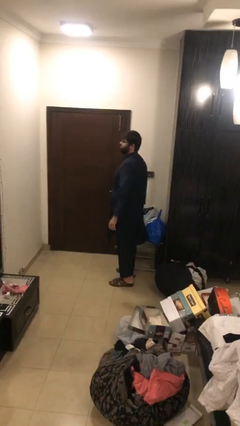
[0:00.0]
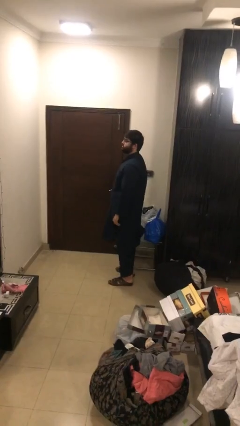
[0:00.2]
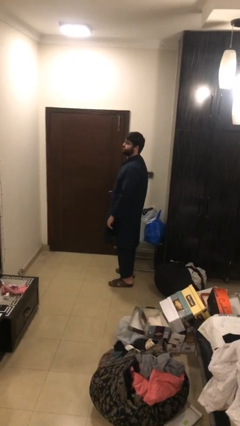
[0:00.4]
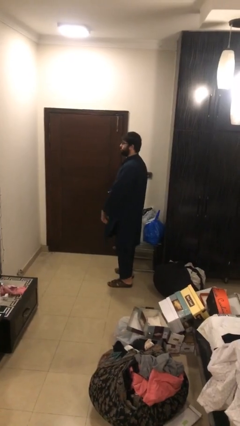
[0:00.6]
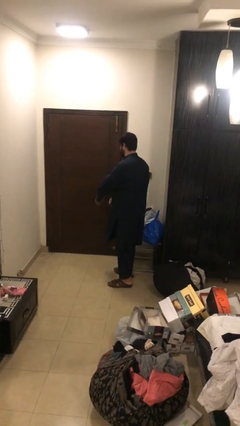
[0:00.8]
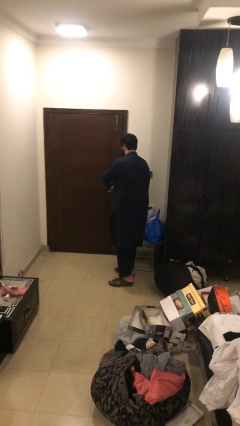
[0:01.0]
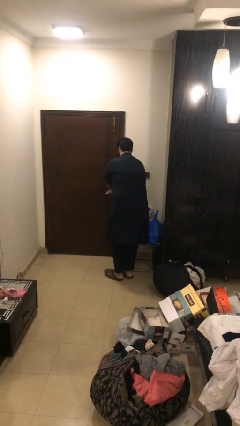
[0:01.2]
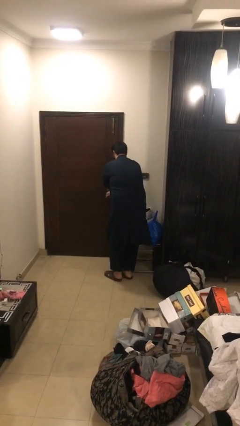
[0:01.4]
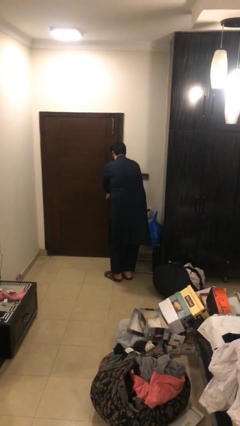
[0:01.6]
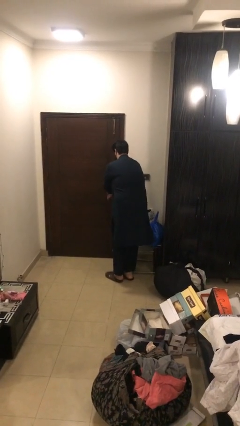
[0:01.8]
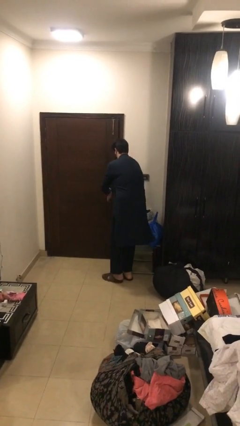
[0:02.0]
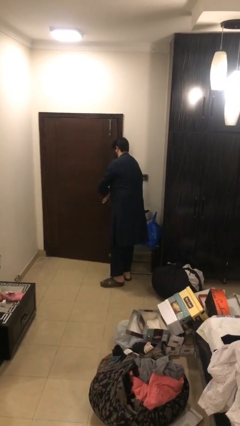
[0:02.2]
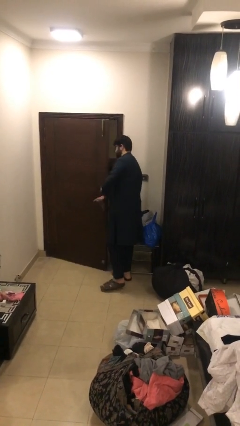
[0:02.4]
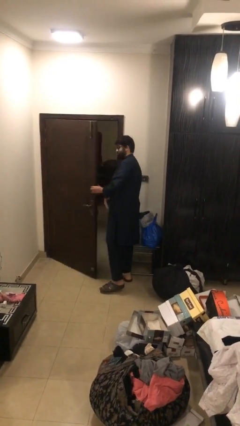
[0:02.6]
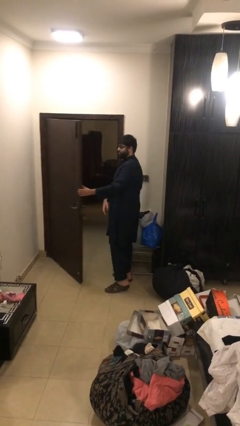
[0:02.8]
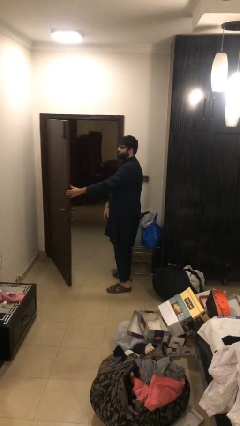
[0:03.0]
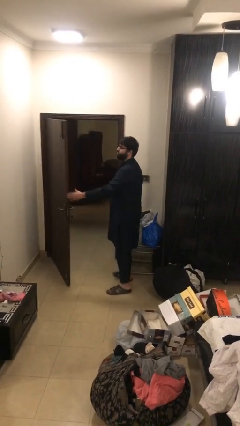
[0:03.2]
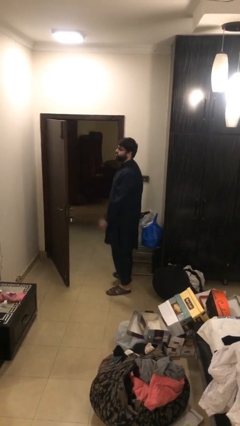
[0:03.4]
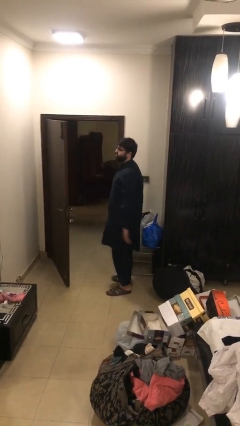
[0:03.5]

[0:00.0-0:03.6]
person opens facility door

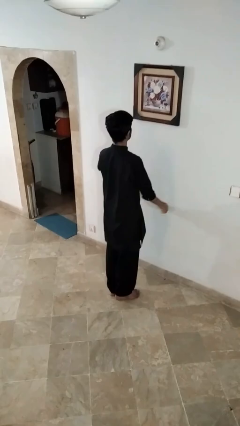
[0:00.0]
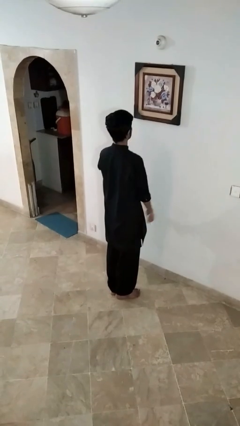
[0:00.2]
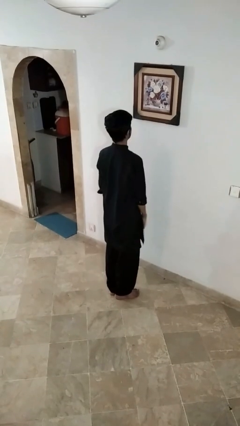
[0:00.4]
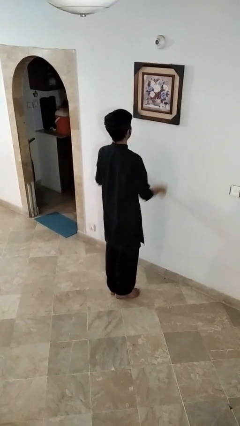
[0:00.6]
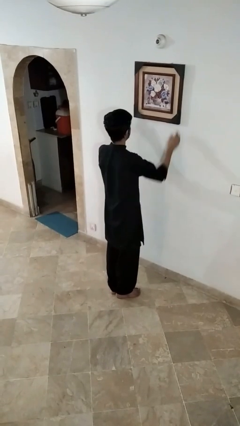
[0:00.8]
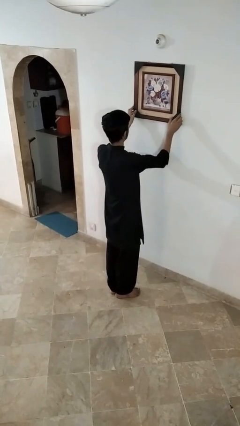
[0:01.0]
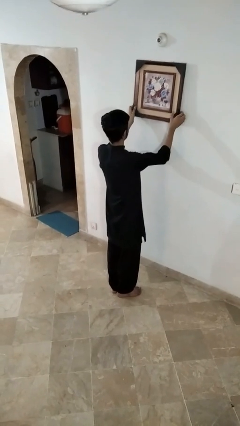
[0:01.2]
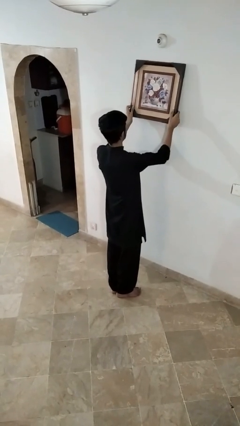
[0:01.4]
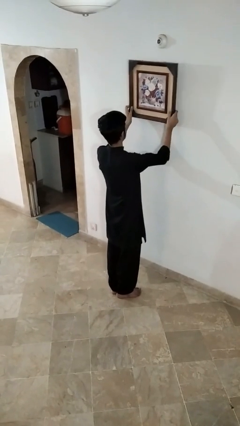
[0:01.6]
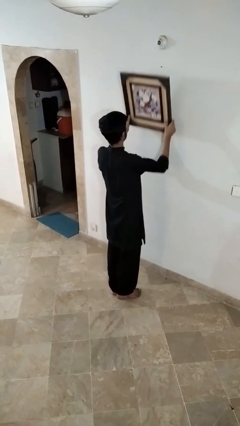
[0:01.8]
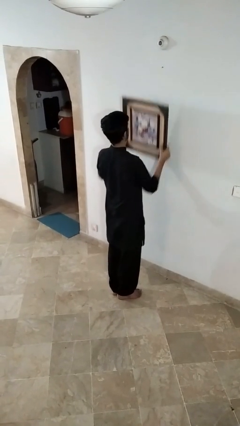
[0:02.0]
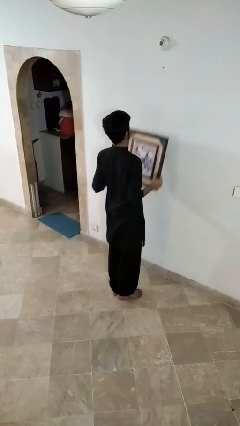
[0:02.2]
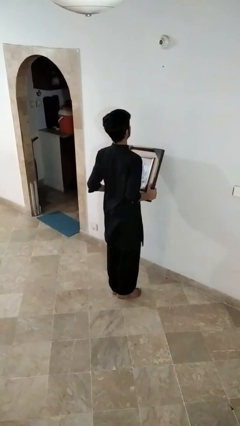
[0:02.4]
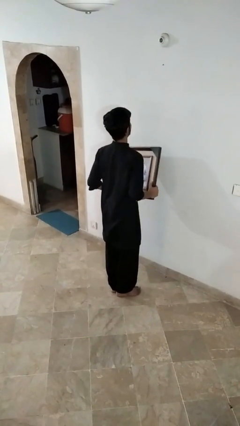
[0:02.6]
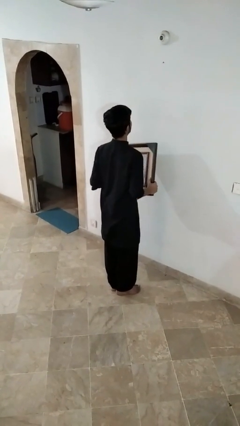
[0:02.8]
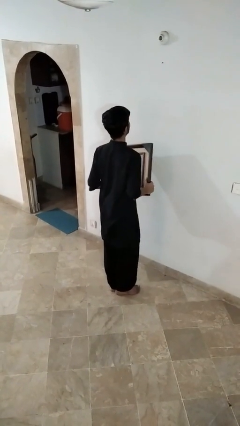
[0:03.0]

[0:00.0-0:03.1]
person takes down picture frame

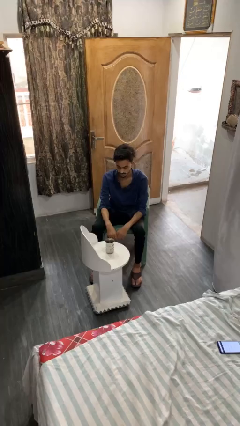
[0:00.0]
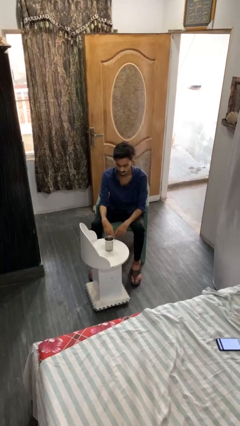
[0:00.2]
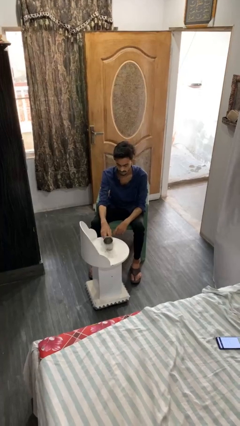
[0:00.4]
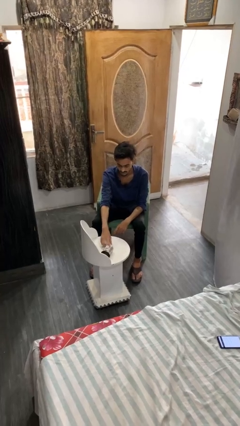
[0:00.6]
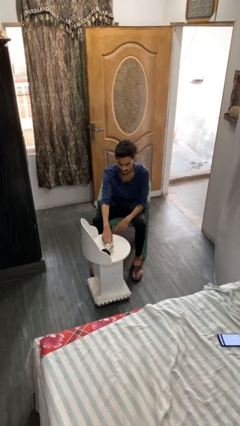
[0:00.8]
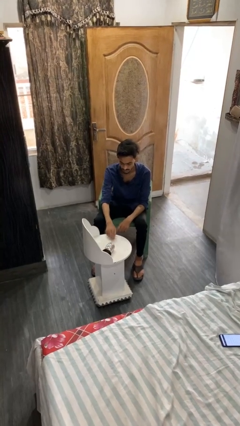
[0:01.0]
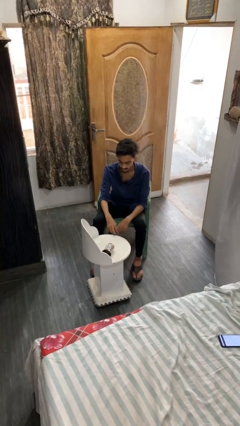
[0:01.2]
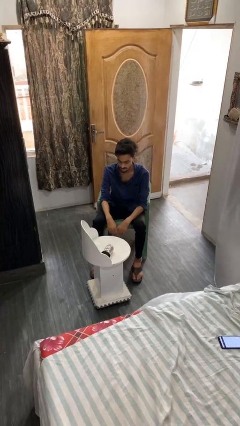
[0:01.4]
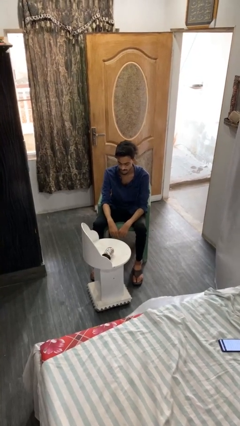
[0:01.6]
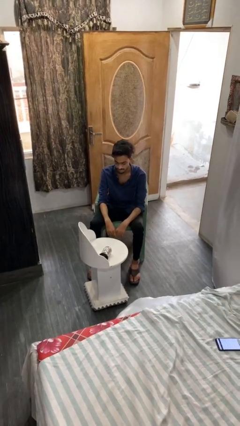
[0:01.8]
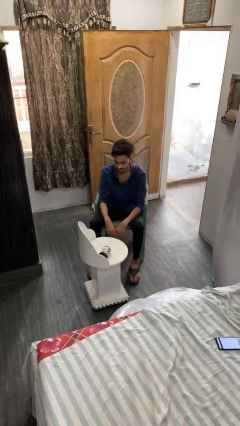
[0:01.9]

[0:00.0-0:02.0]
person knocks over glass

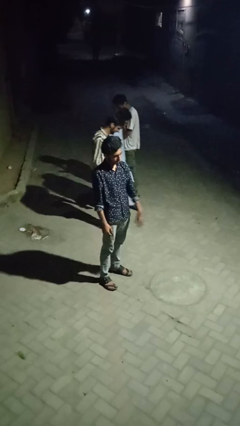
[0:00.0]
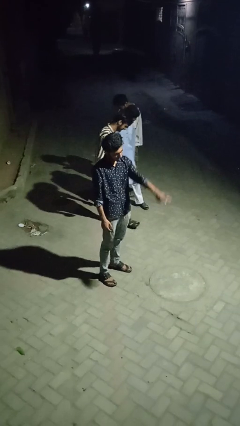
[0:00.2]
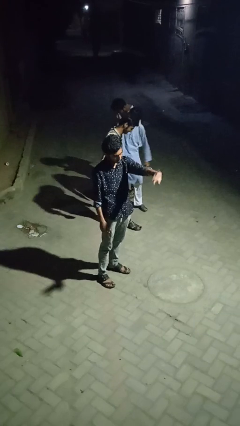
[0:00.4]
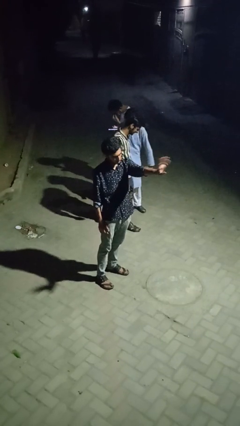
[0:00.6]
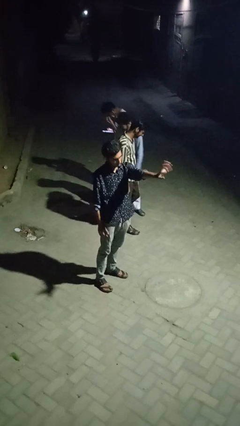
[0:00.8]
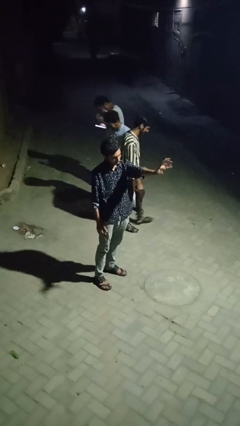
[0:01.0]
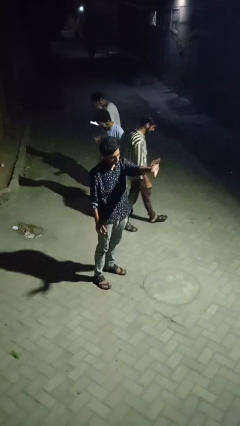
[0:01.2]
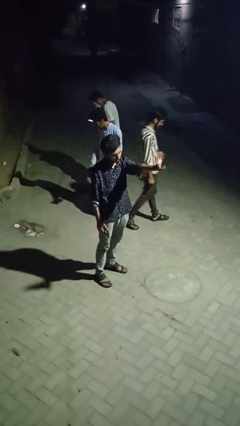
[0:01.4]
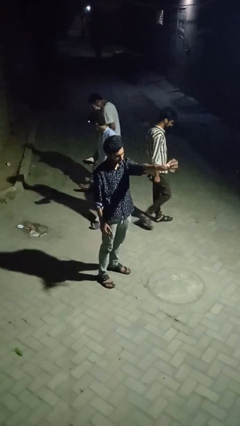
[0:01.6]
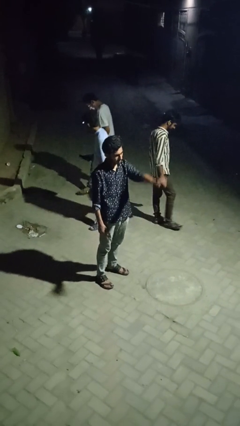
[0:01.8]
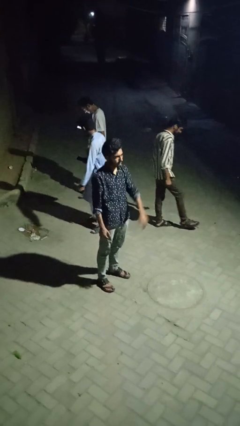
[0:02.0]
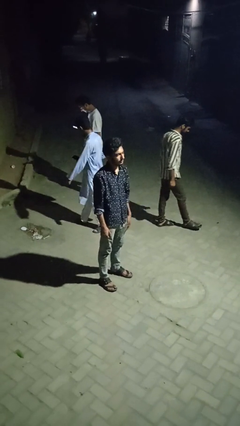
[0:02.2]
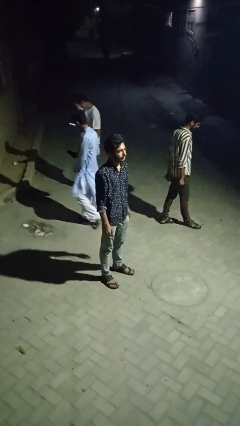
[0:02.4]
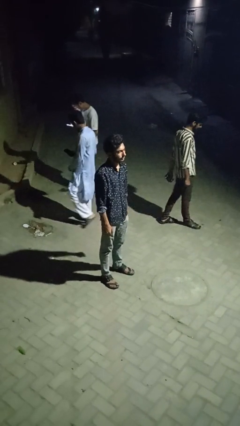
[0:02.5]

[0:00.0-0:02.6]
person waves at person

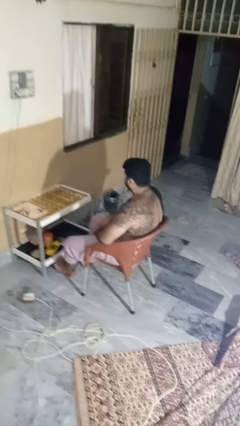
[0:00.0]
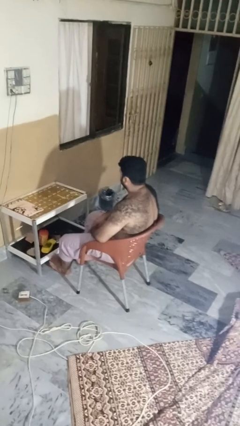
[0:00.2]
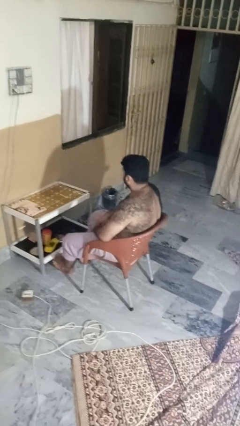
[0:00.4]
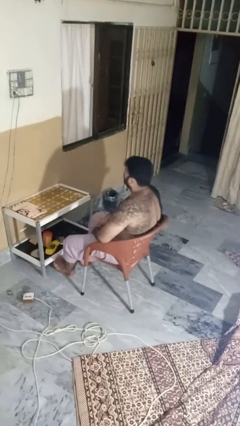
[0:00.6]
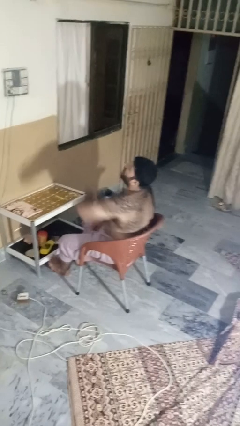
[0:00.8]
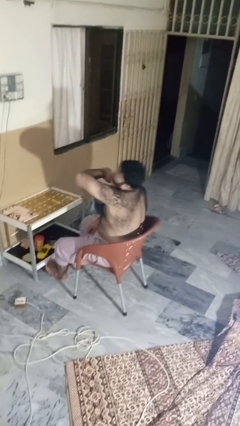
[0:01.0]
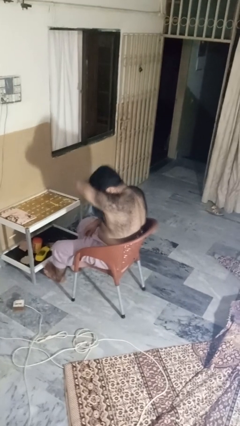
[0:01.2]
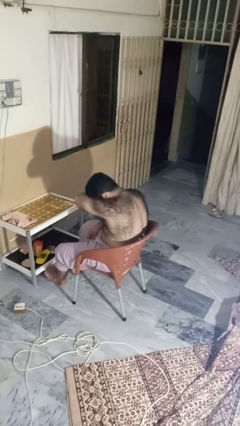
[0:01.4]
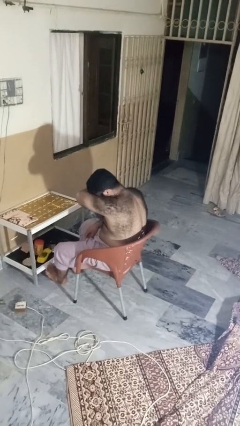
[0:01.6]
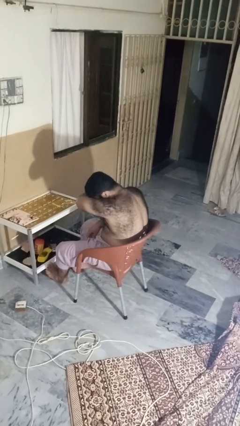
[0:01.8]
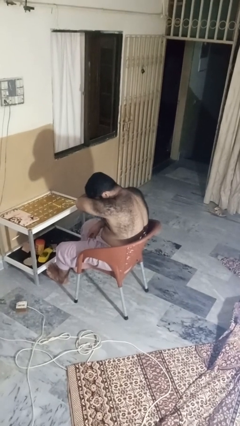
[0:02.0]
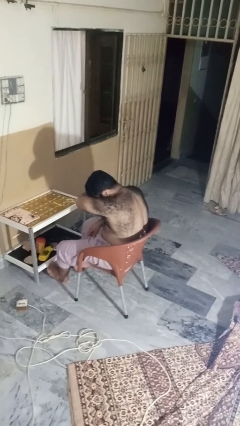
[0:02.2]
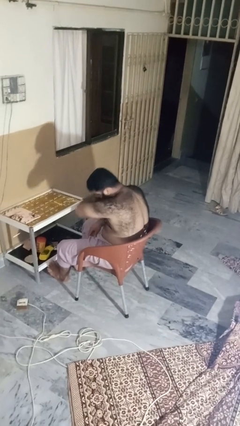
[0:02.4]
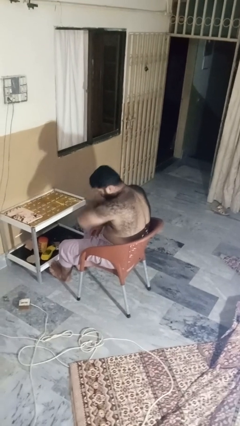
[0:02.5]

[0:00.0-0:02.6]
person sneezes into arm

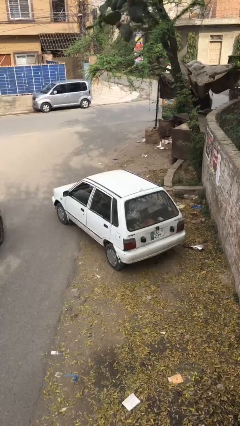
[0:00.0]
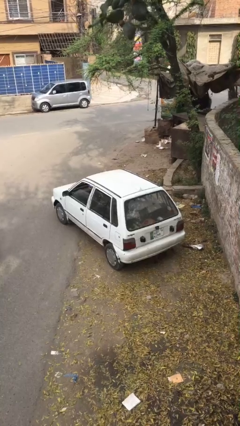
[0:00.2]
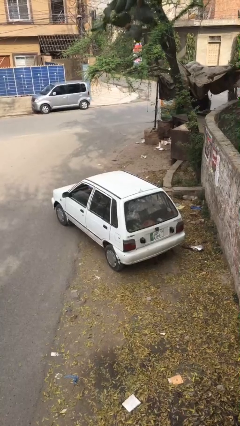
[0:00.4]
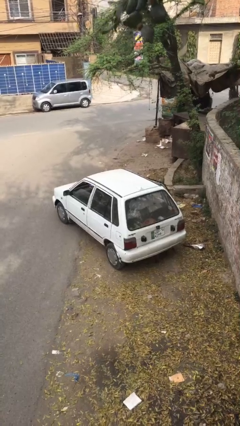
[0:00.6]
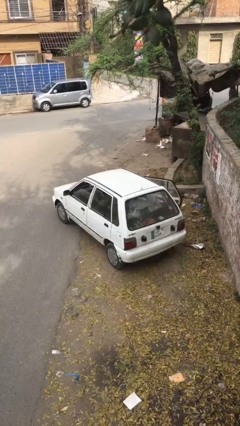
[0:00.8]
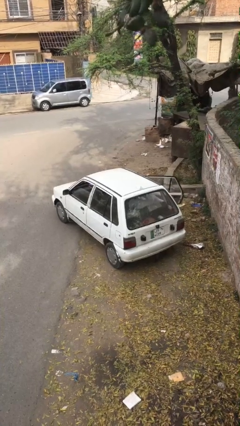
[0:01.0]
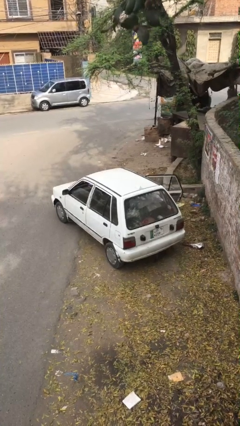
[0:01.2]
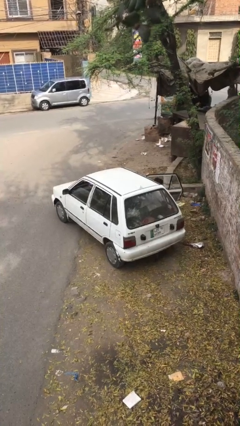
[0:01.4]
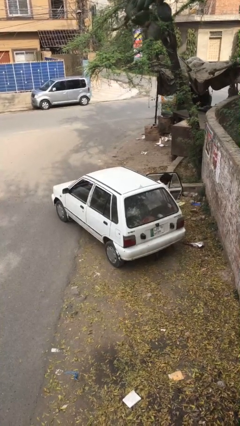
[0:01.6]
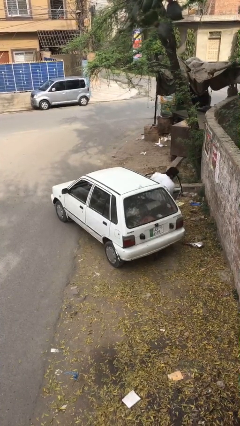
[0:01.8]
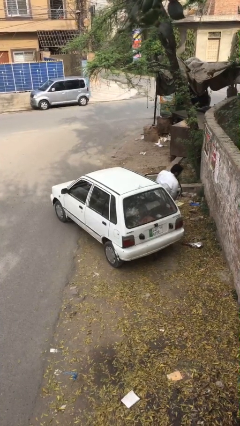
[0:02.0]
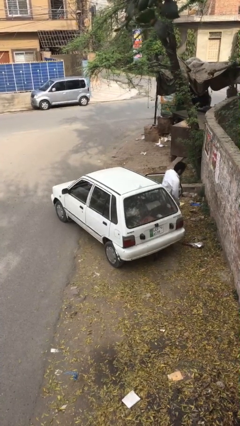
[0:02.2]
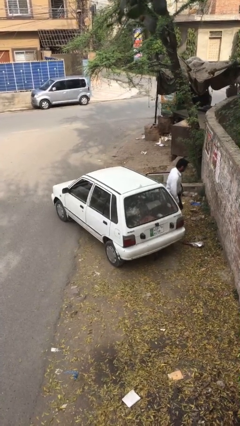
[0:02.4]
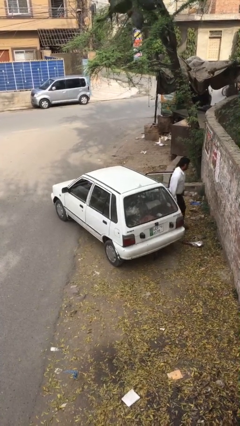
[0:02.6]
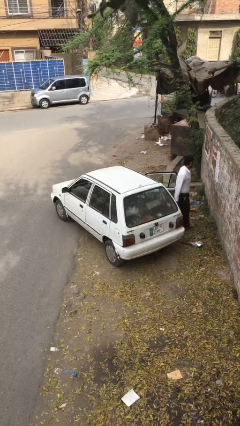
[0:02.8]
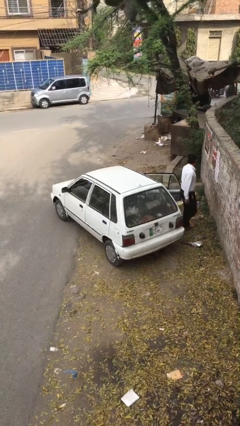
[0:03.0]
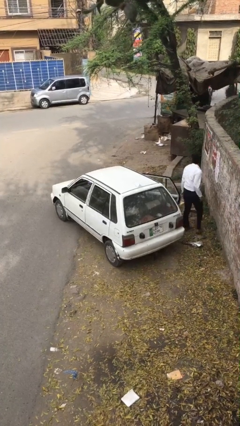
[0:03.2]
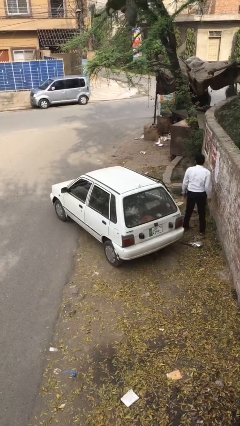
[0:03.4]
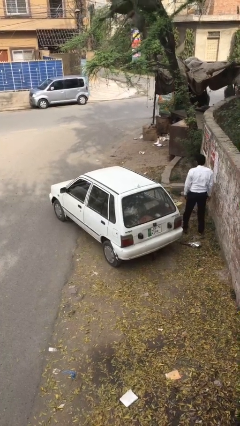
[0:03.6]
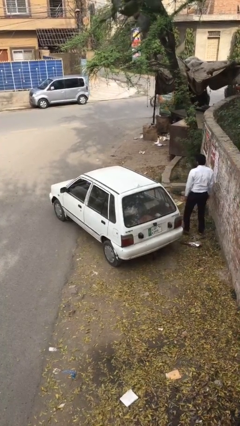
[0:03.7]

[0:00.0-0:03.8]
car drops off person
